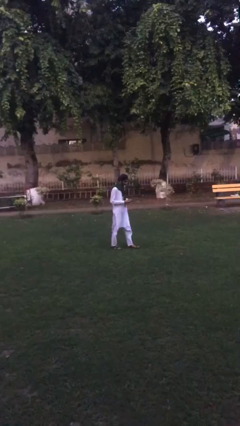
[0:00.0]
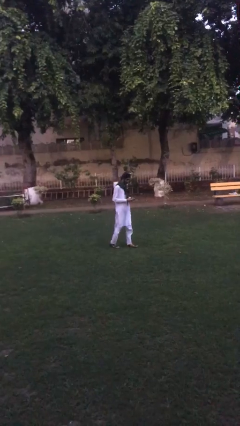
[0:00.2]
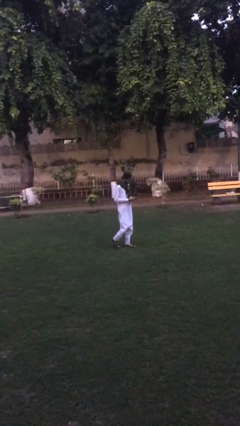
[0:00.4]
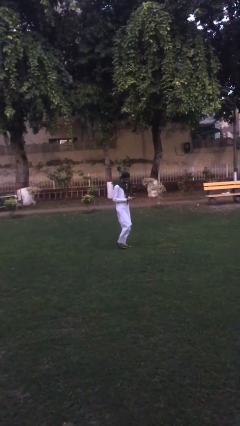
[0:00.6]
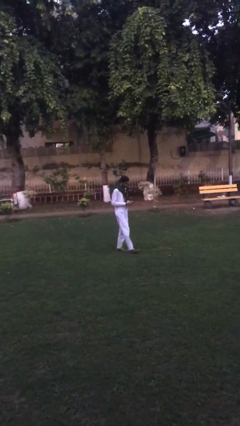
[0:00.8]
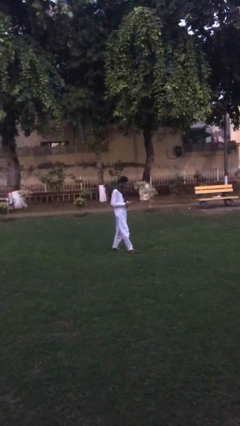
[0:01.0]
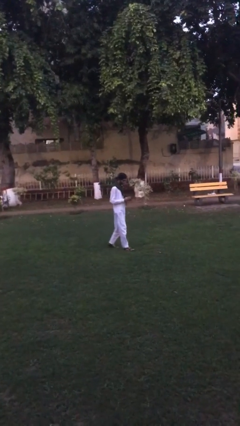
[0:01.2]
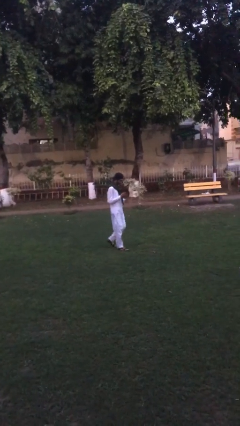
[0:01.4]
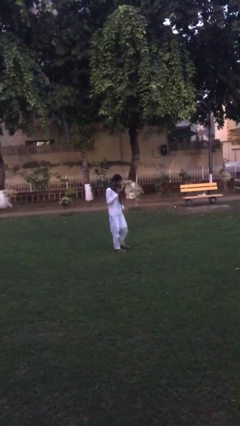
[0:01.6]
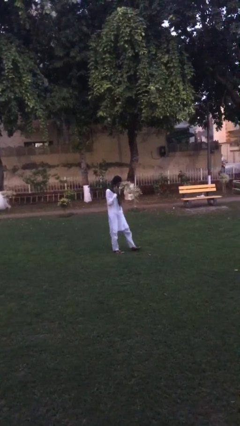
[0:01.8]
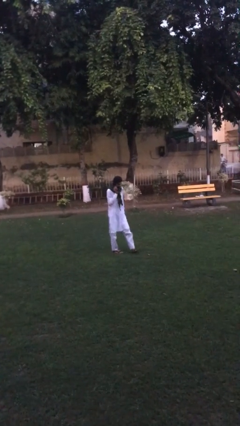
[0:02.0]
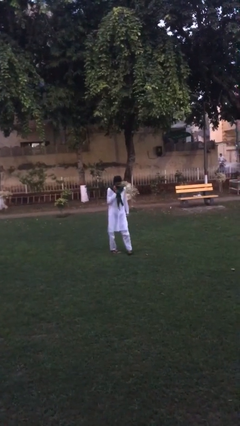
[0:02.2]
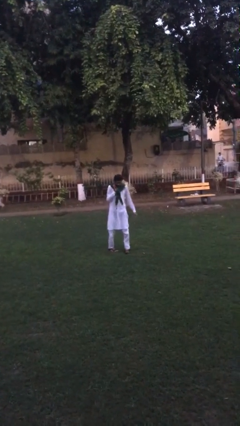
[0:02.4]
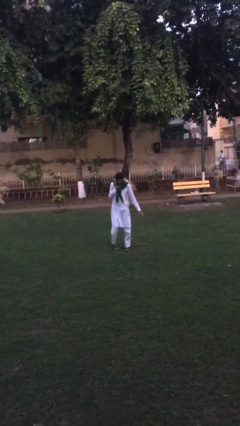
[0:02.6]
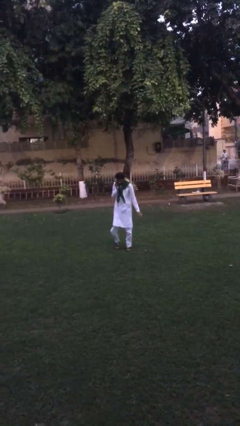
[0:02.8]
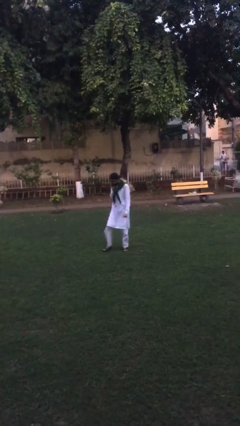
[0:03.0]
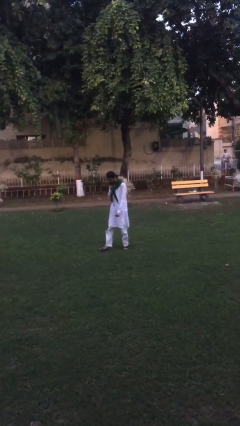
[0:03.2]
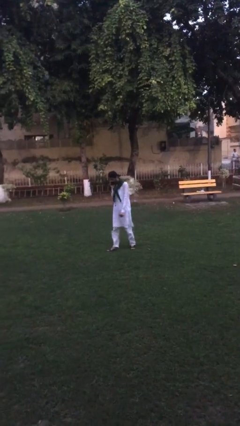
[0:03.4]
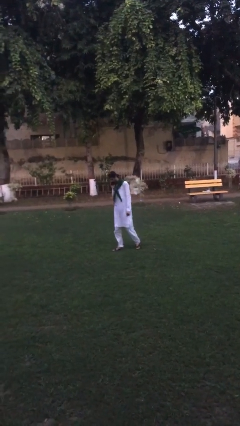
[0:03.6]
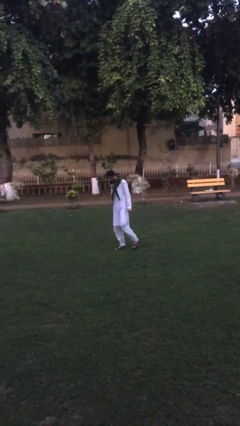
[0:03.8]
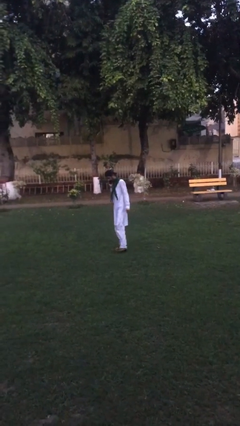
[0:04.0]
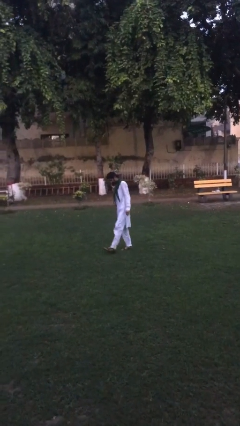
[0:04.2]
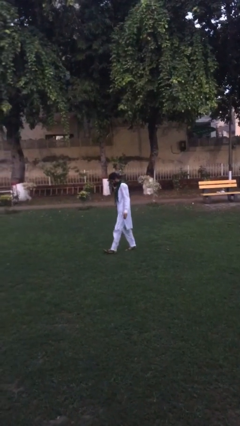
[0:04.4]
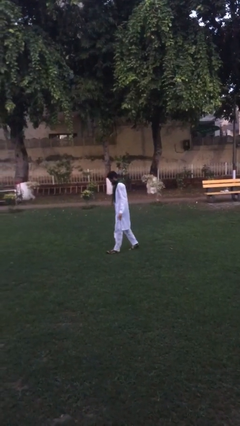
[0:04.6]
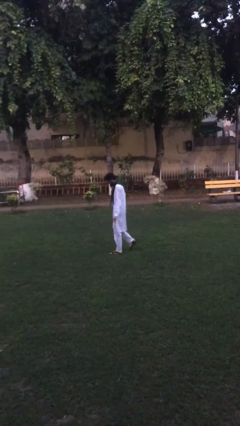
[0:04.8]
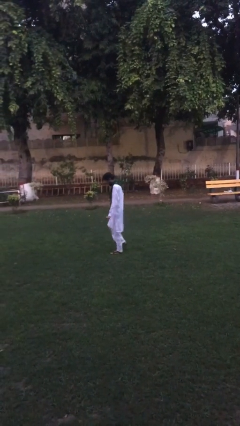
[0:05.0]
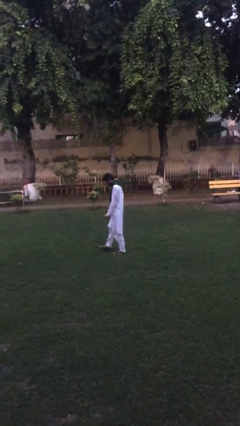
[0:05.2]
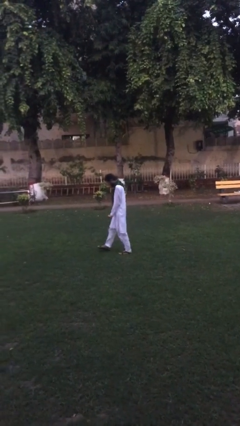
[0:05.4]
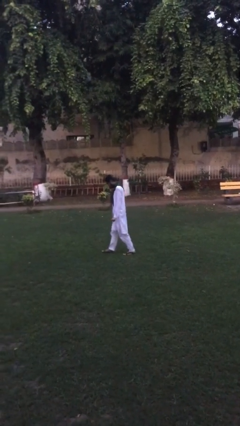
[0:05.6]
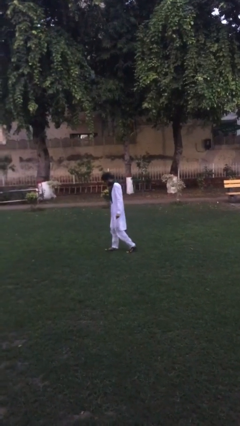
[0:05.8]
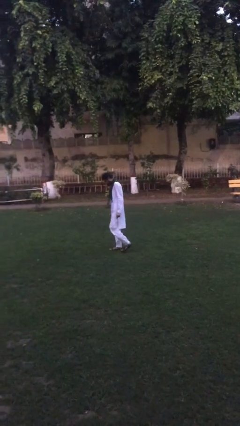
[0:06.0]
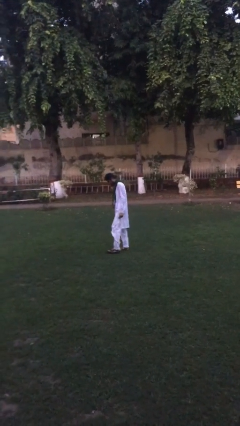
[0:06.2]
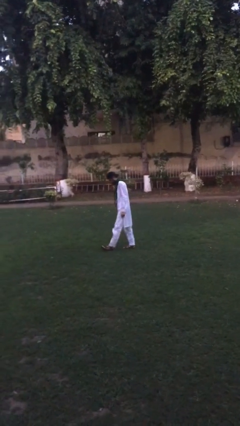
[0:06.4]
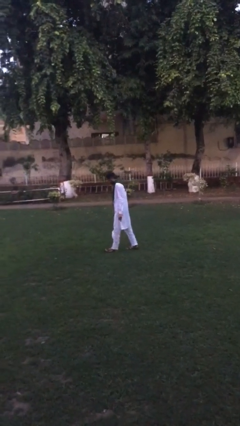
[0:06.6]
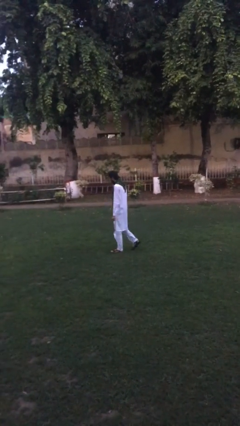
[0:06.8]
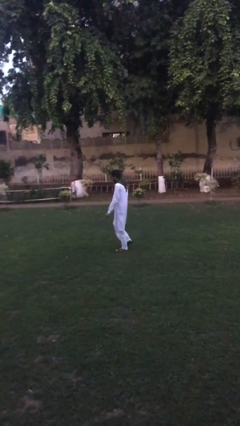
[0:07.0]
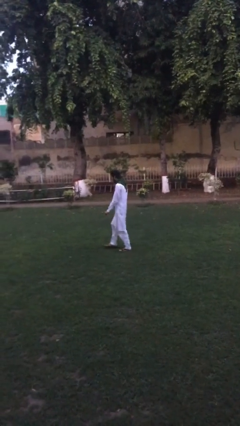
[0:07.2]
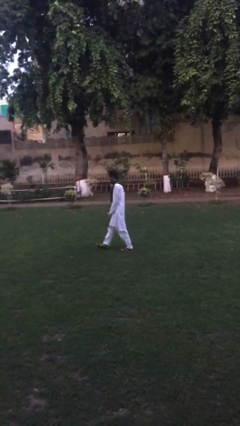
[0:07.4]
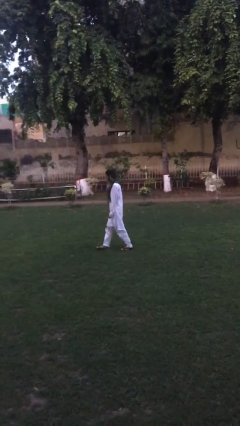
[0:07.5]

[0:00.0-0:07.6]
person talks on phone

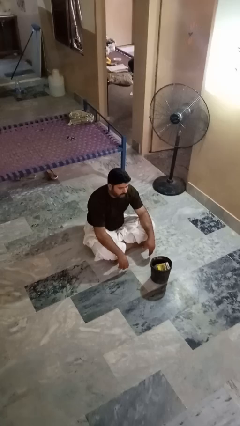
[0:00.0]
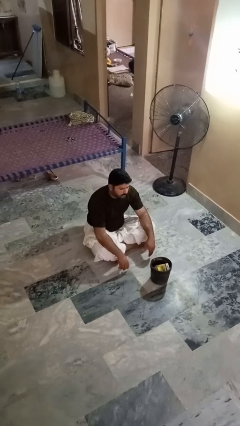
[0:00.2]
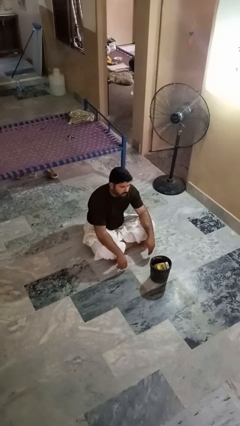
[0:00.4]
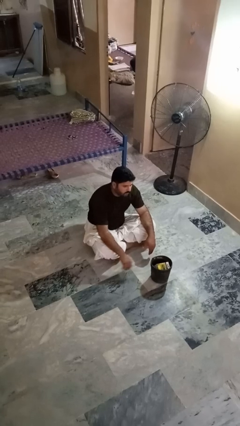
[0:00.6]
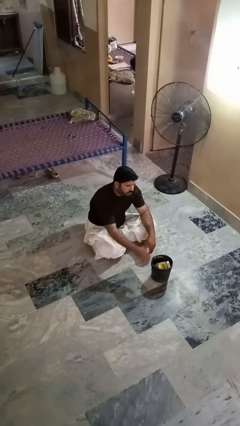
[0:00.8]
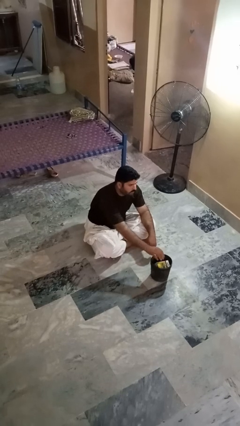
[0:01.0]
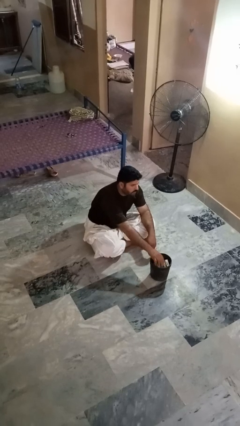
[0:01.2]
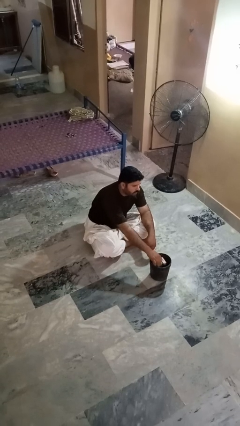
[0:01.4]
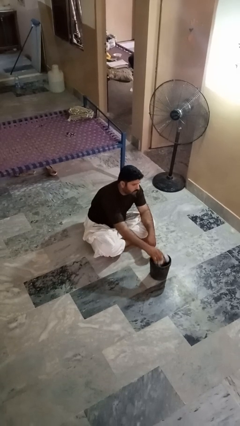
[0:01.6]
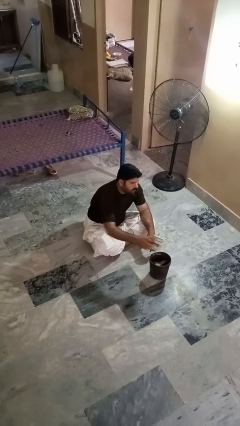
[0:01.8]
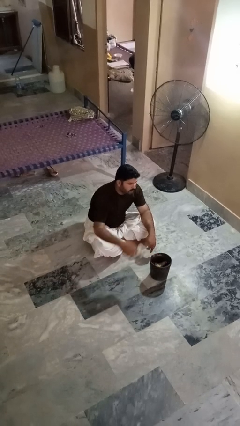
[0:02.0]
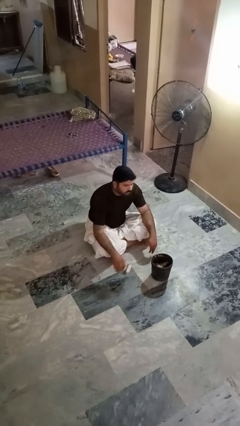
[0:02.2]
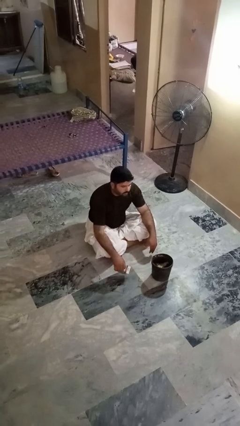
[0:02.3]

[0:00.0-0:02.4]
person takes object from basket

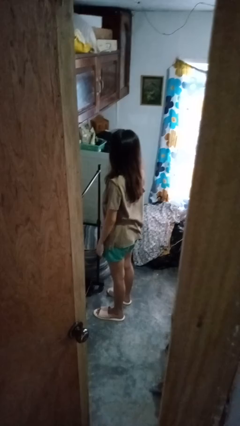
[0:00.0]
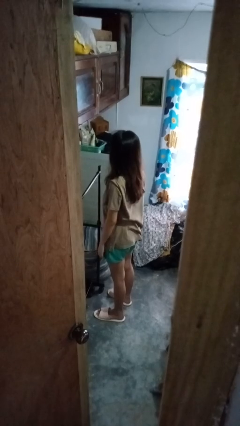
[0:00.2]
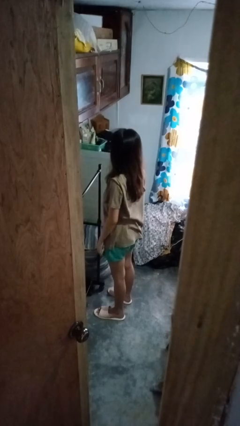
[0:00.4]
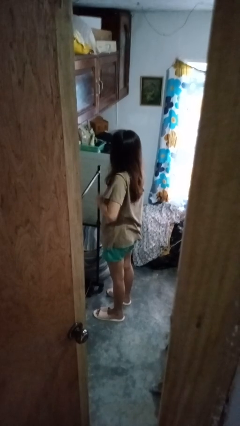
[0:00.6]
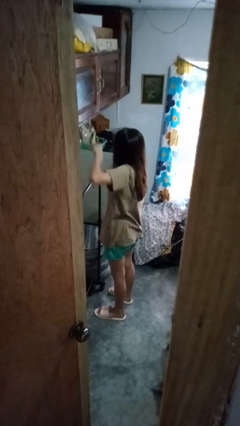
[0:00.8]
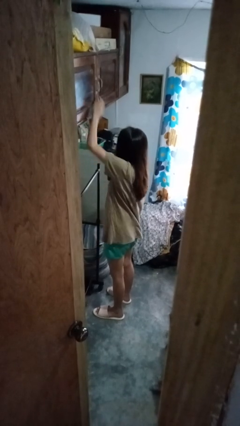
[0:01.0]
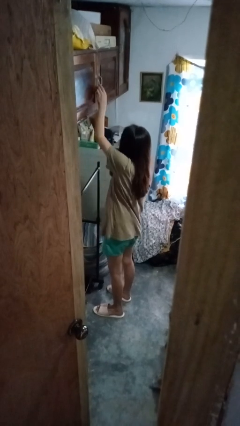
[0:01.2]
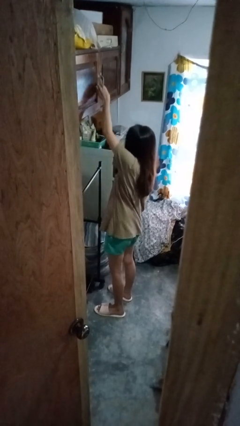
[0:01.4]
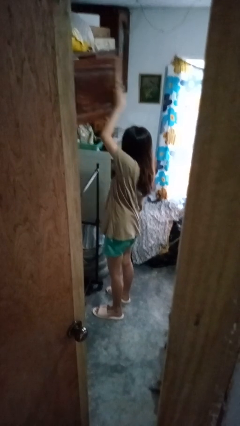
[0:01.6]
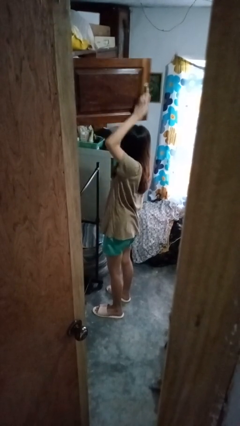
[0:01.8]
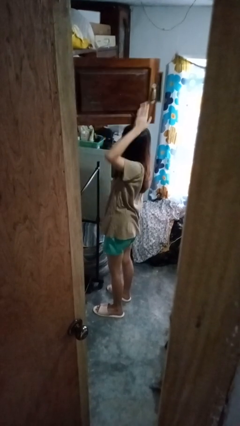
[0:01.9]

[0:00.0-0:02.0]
person opens closet door

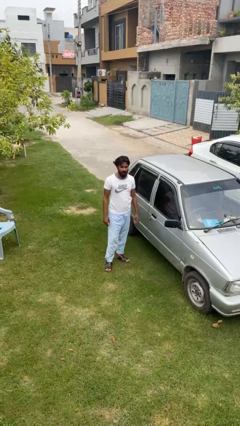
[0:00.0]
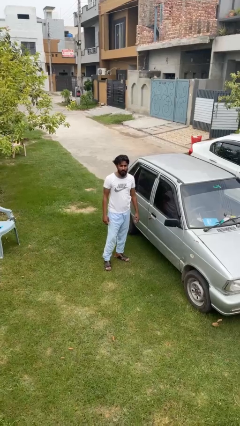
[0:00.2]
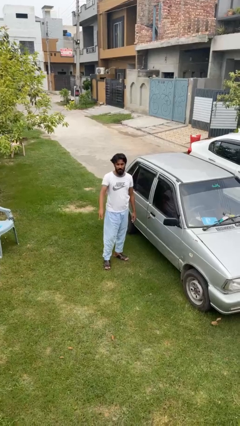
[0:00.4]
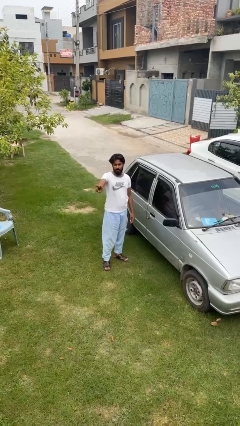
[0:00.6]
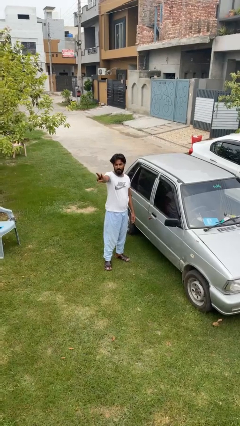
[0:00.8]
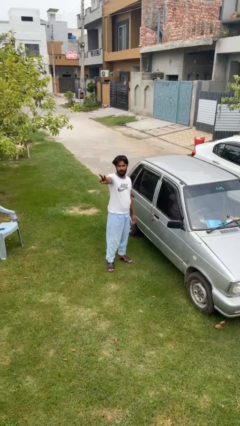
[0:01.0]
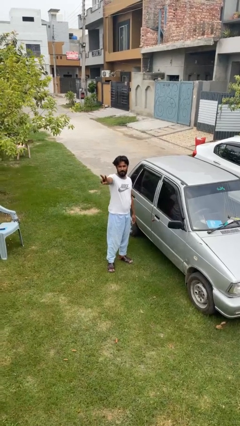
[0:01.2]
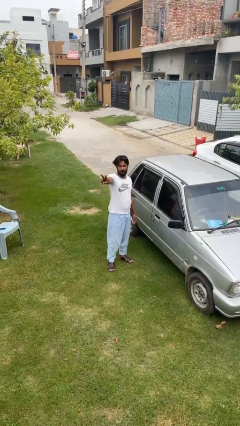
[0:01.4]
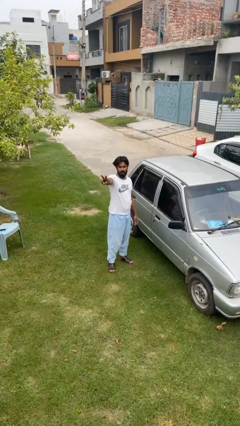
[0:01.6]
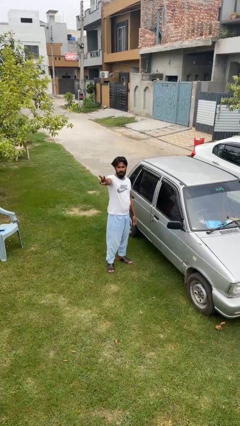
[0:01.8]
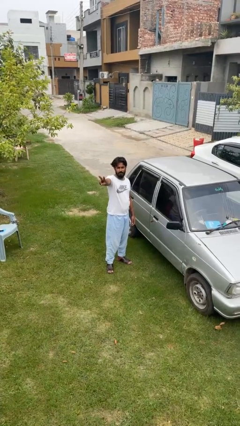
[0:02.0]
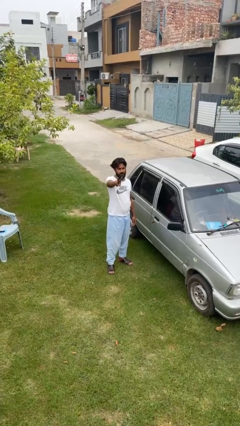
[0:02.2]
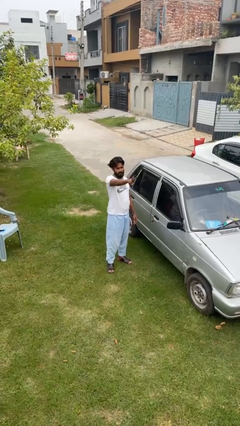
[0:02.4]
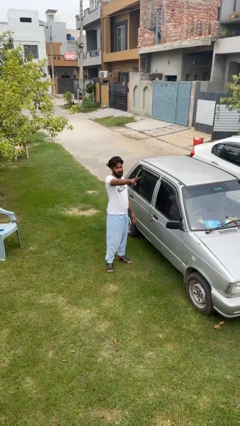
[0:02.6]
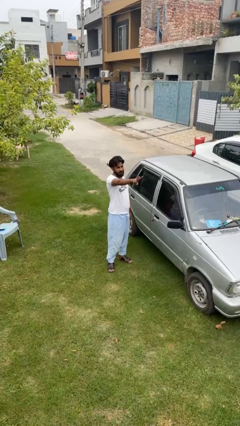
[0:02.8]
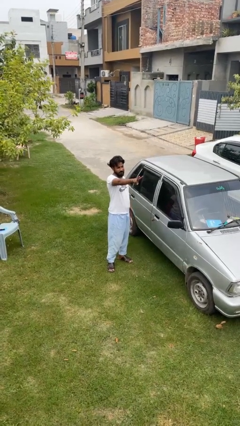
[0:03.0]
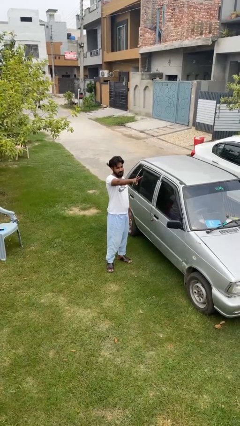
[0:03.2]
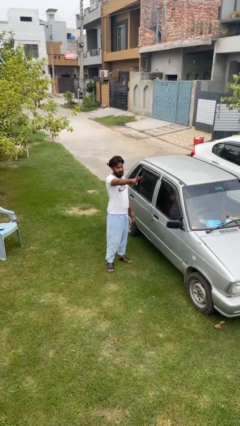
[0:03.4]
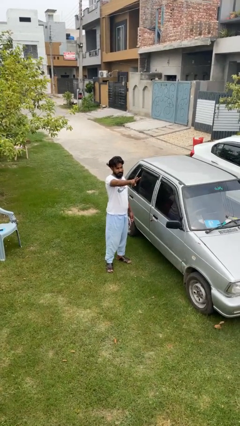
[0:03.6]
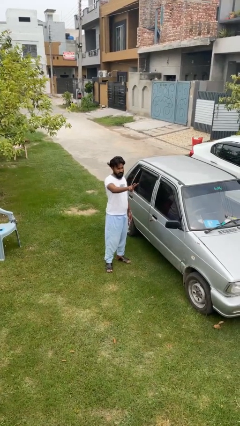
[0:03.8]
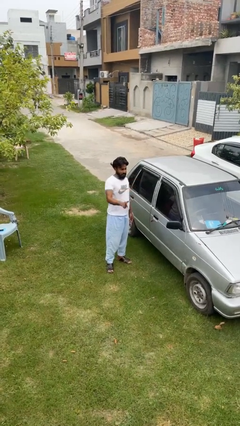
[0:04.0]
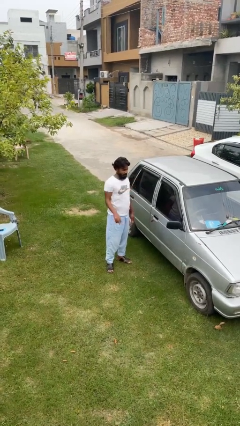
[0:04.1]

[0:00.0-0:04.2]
person gestures peace

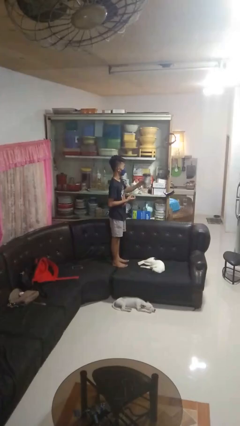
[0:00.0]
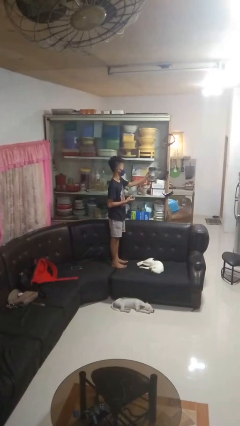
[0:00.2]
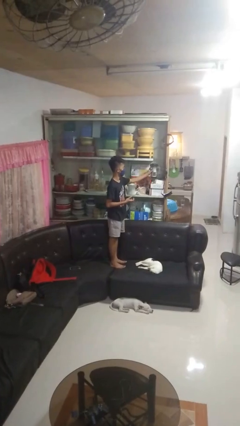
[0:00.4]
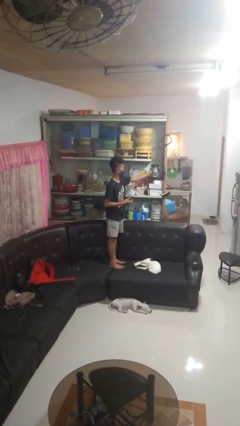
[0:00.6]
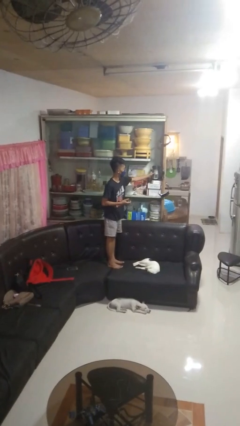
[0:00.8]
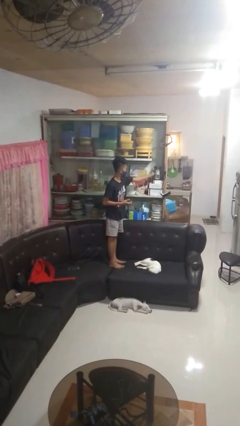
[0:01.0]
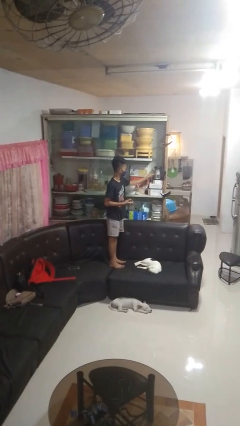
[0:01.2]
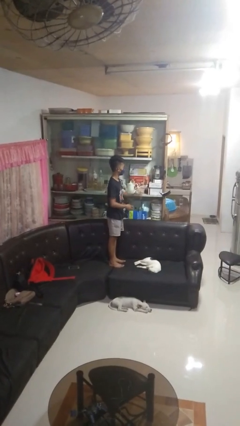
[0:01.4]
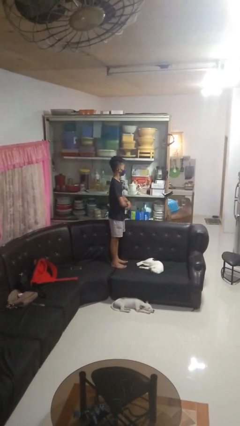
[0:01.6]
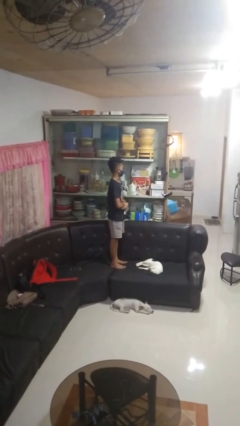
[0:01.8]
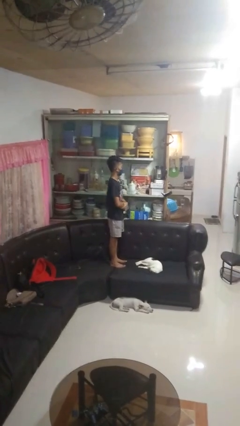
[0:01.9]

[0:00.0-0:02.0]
person puts down object into cabinet
